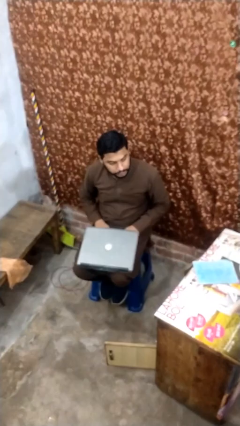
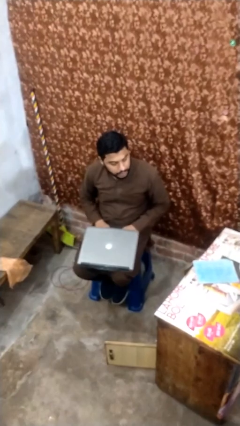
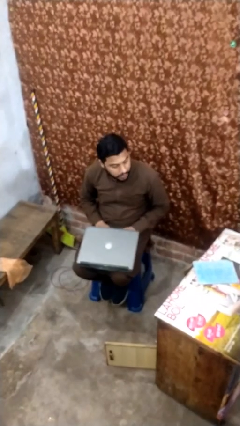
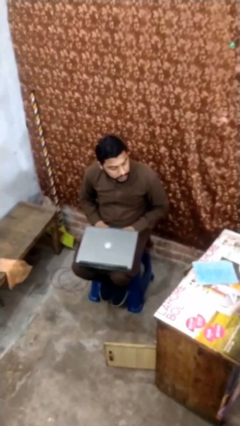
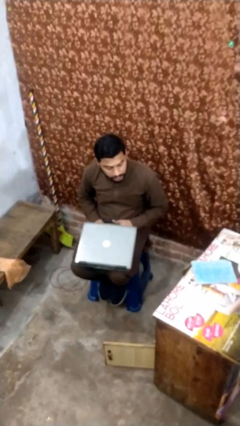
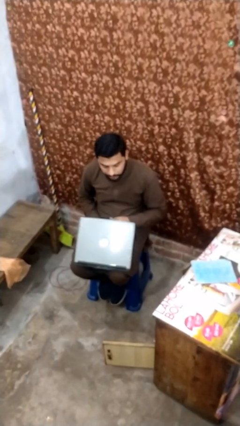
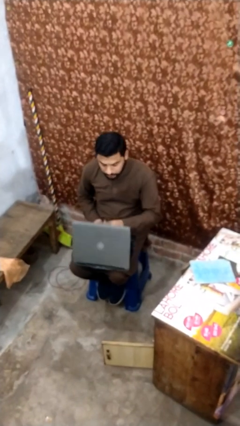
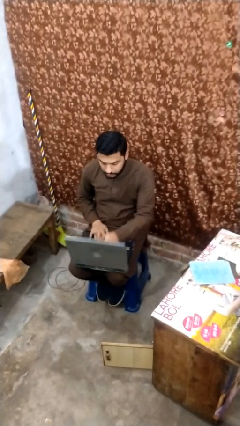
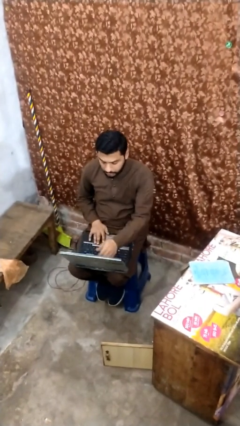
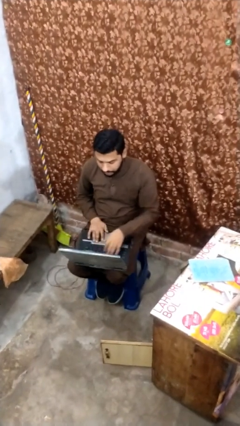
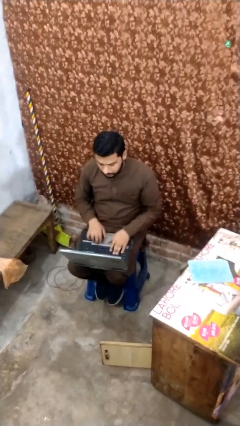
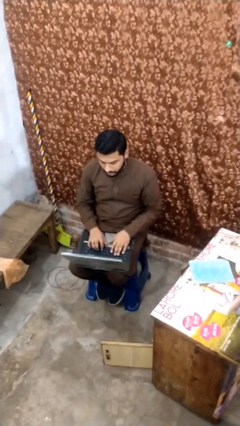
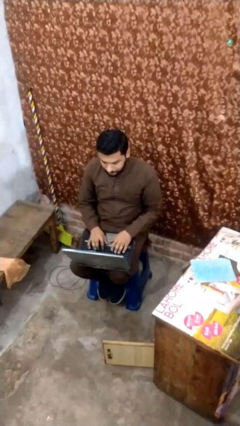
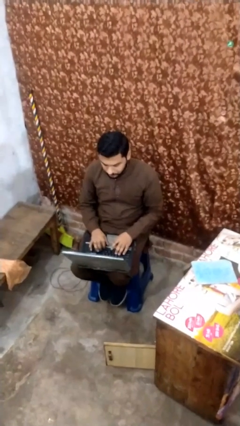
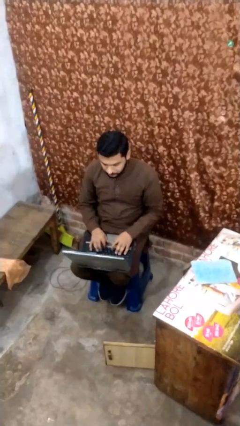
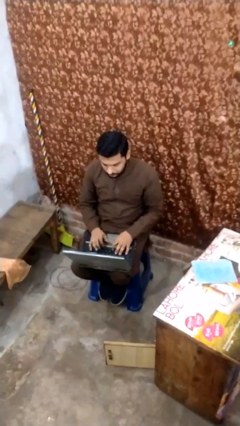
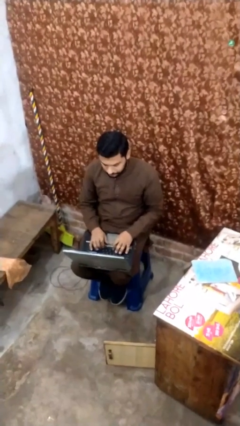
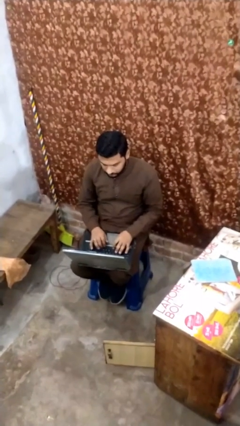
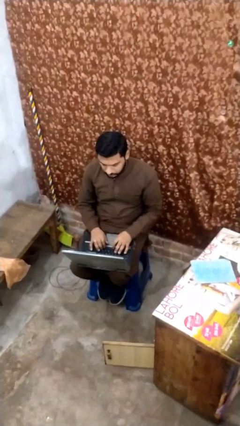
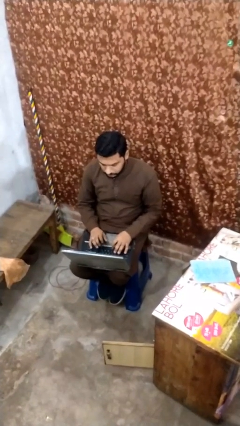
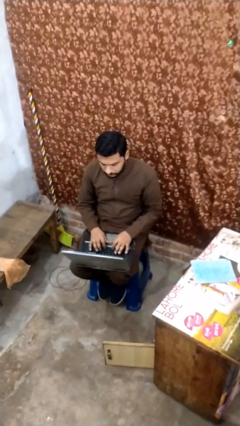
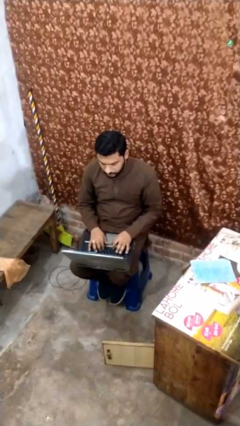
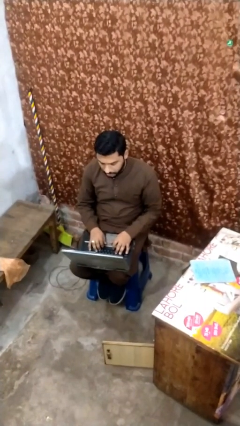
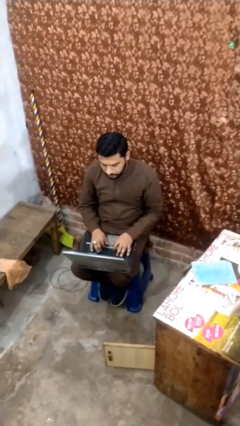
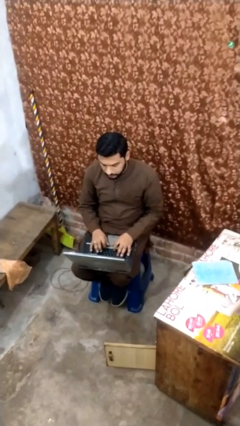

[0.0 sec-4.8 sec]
person interacts with laptop

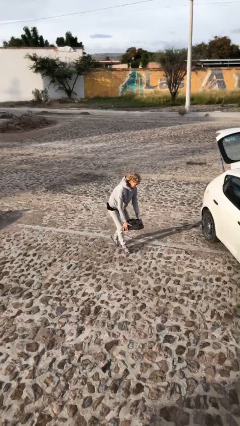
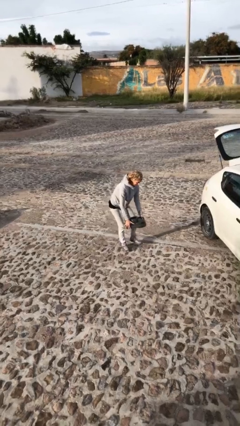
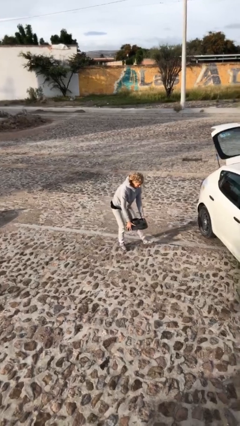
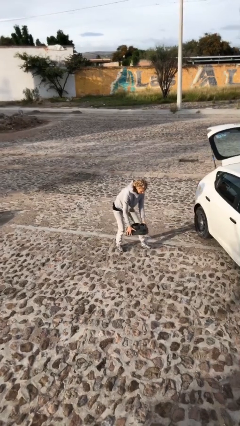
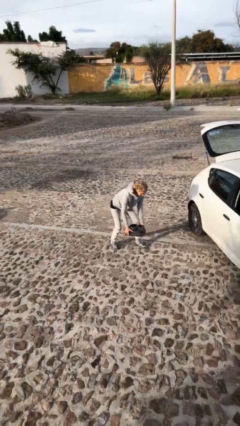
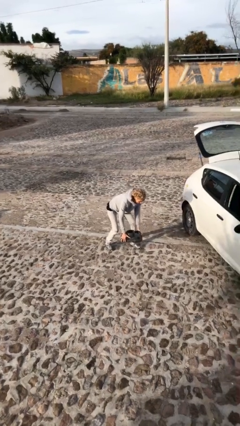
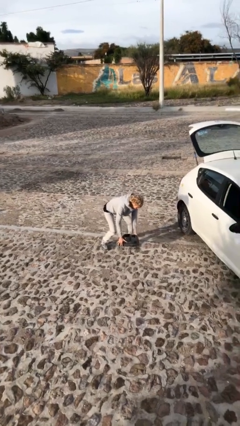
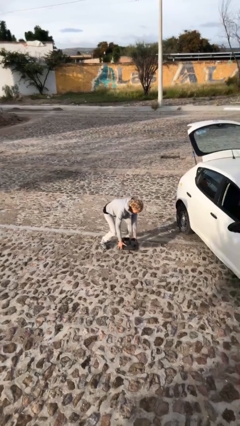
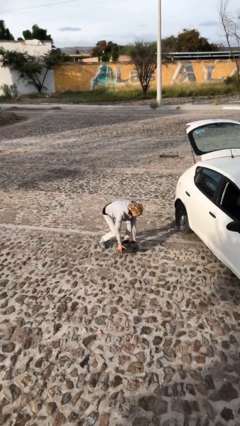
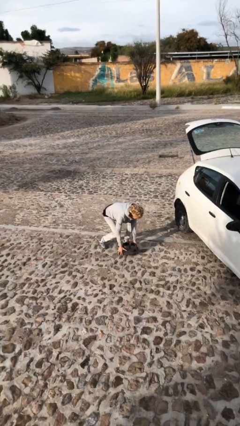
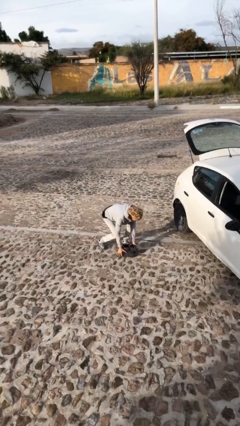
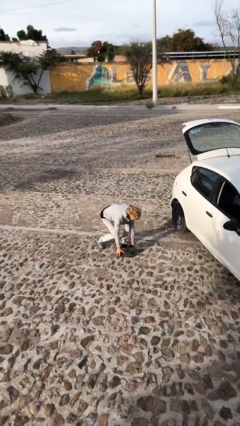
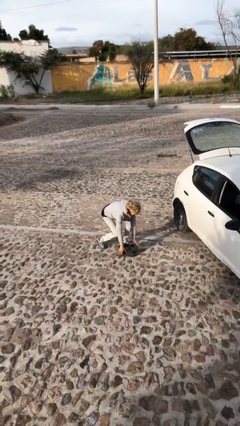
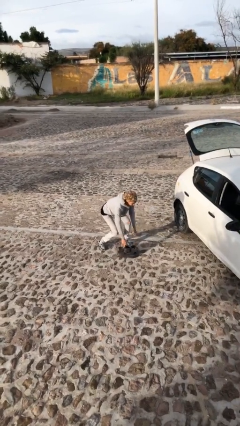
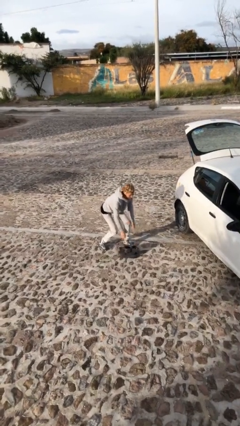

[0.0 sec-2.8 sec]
person puts down object on floor

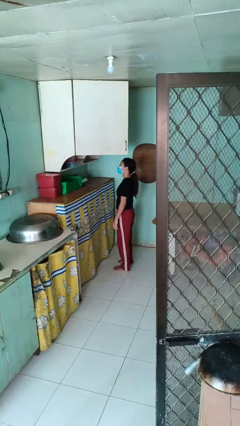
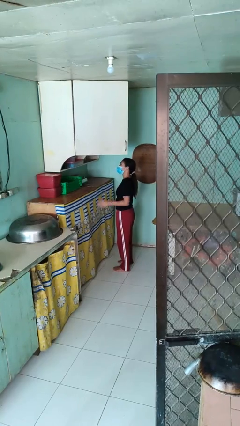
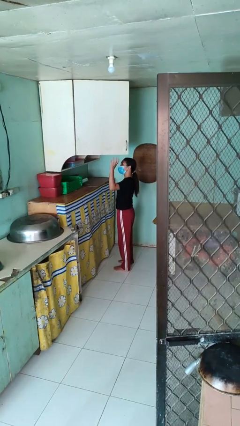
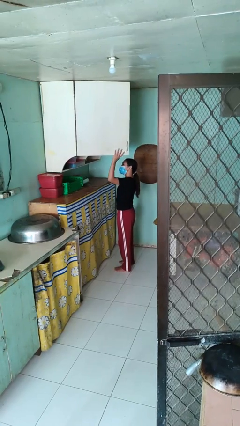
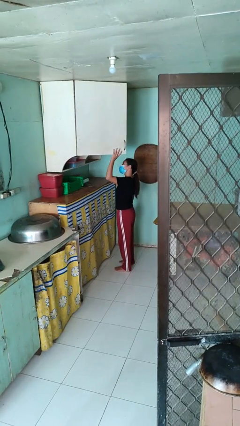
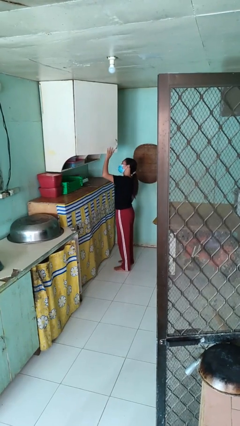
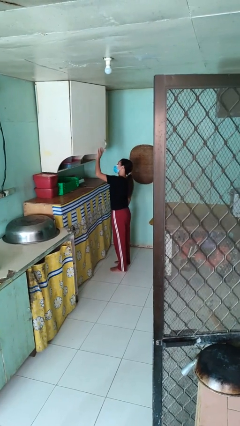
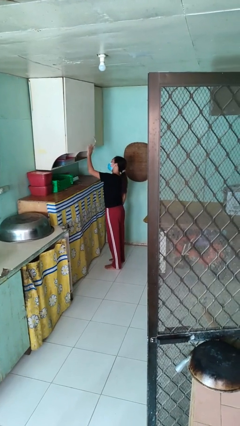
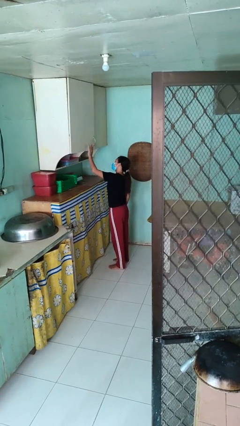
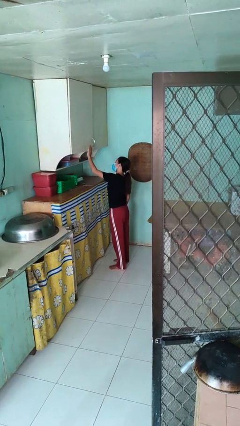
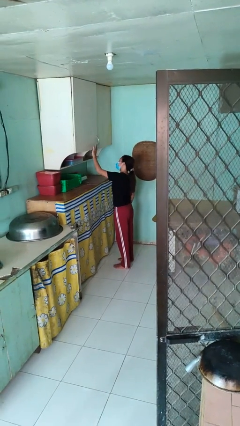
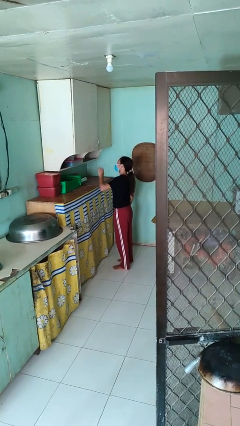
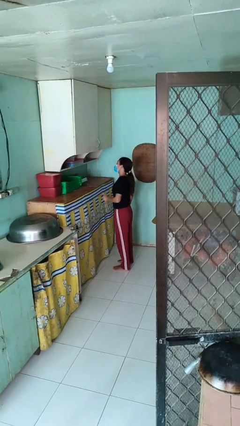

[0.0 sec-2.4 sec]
person closes cabinet

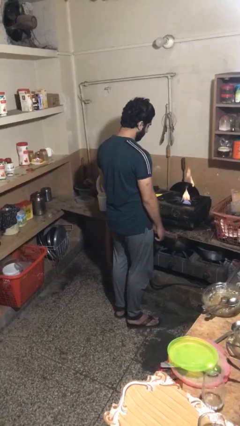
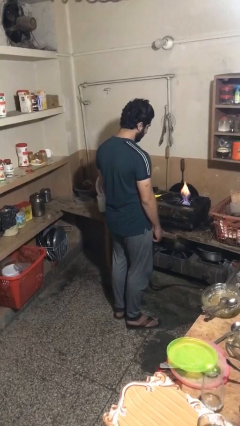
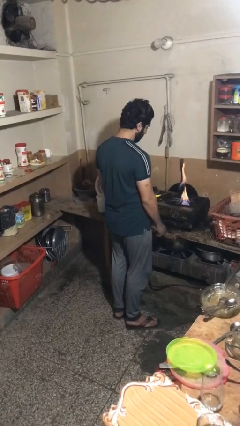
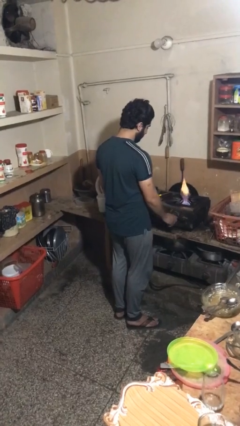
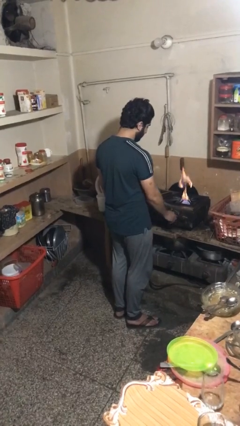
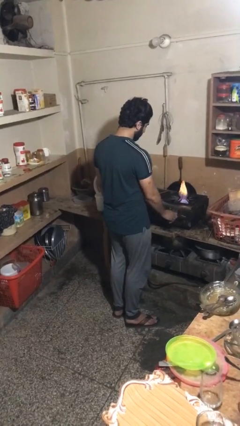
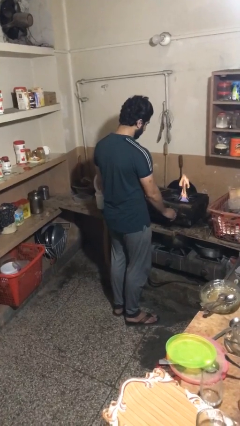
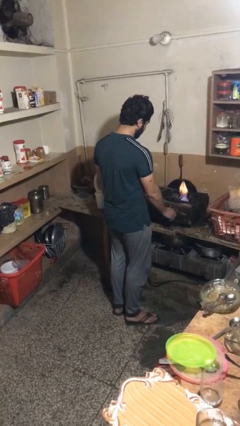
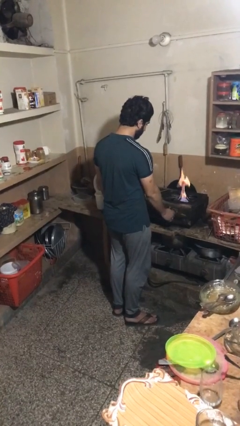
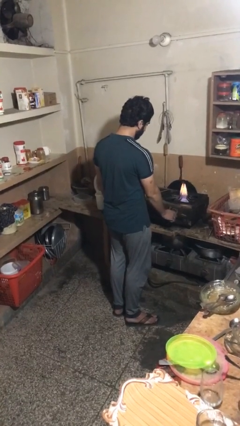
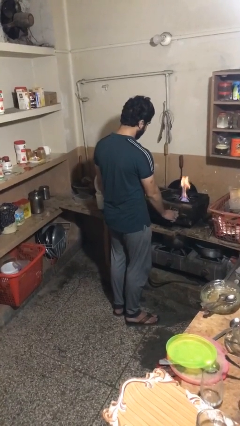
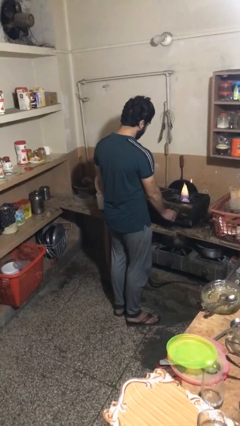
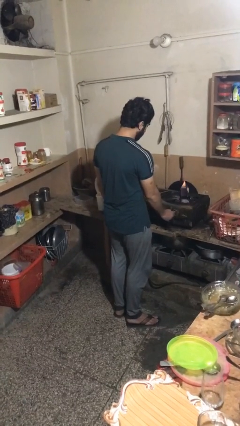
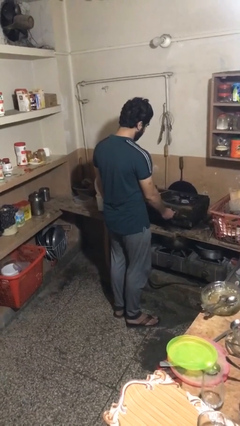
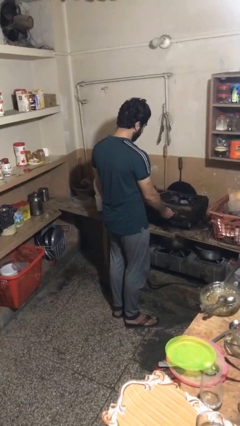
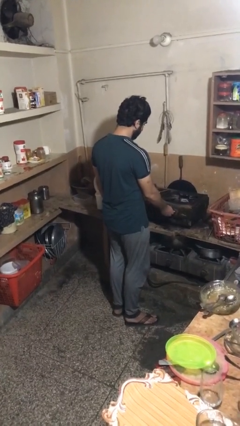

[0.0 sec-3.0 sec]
person turns off stovetop

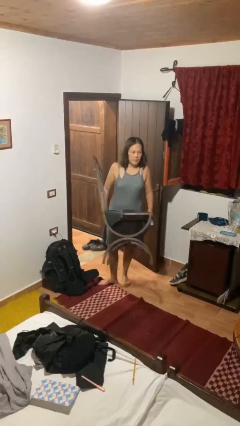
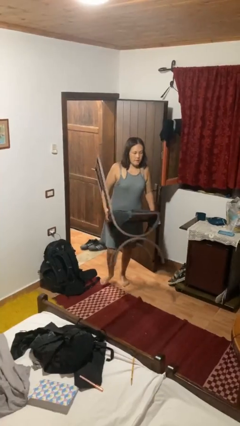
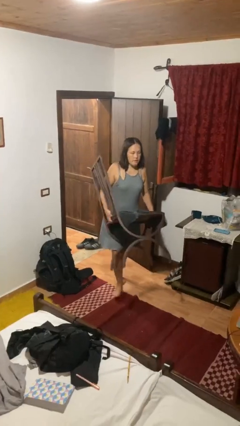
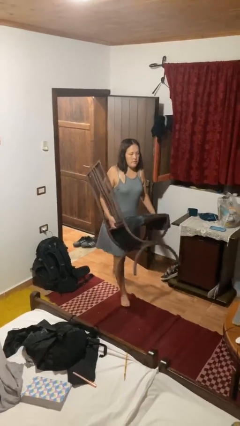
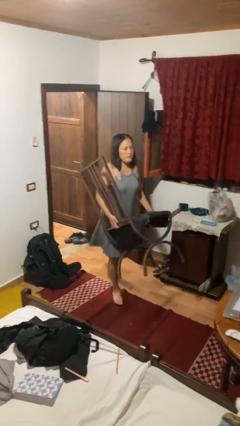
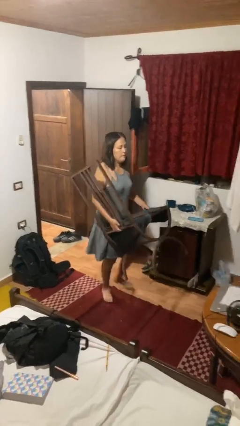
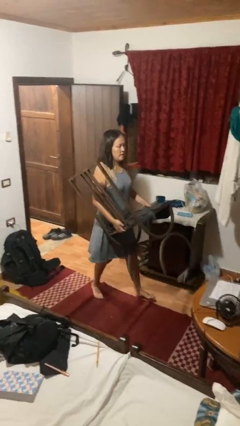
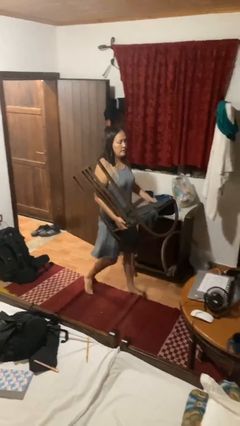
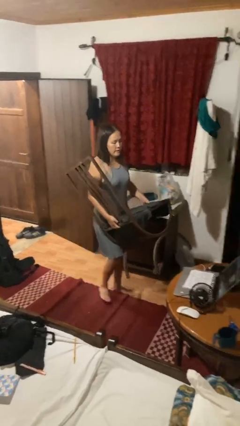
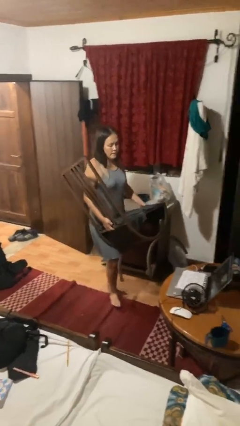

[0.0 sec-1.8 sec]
person carries furniture

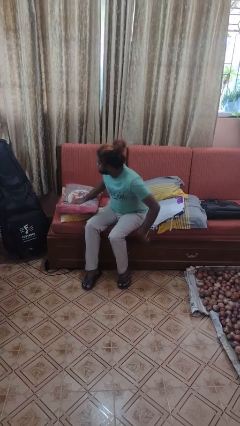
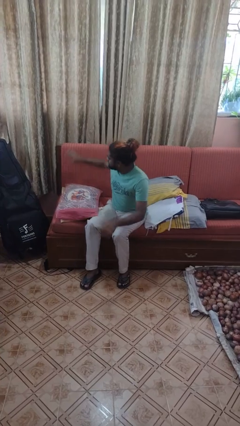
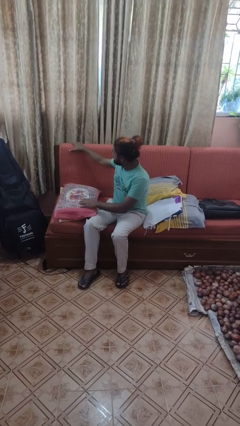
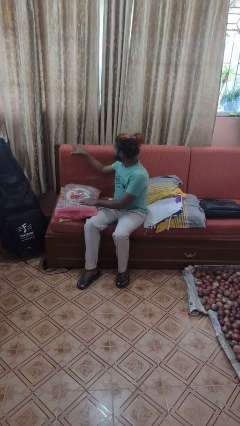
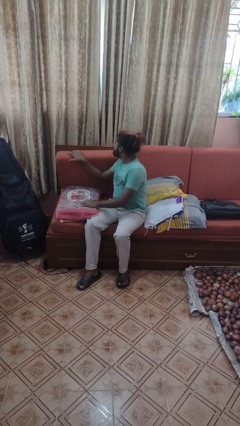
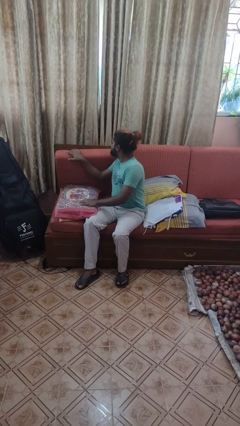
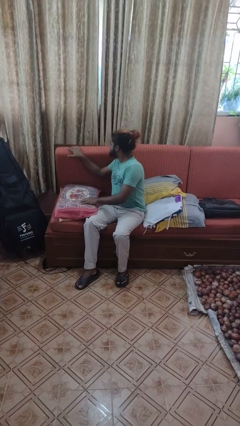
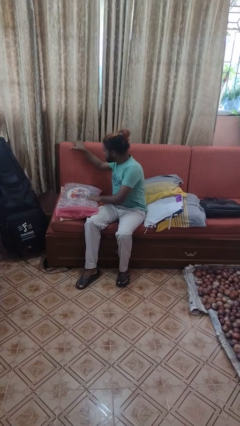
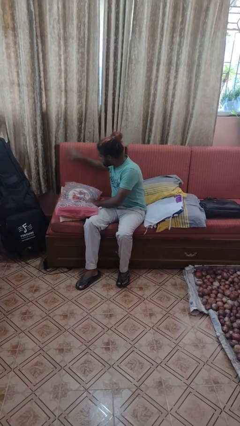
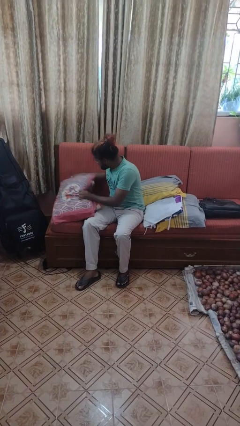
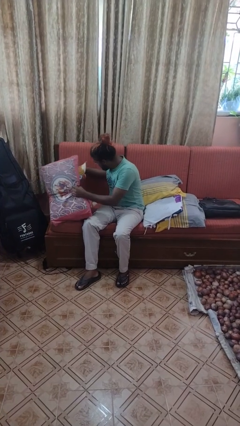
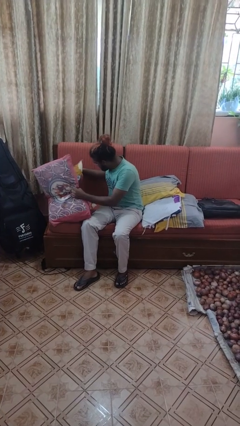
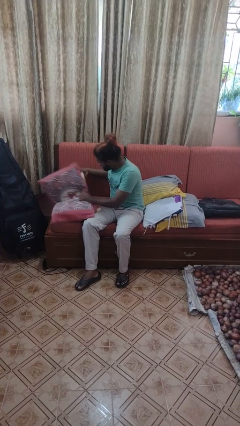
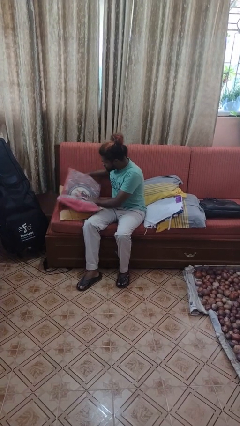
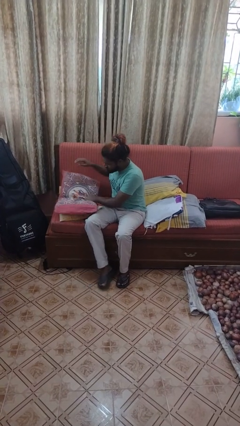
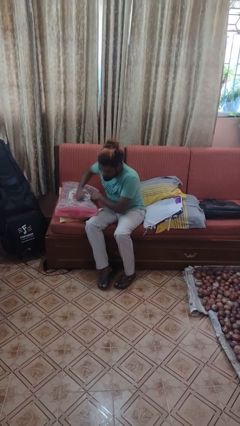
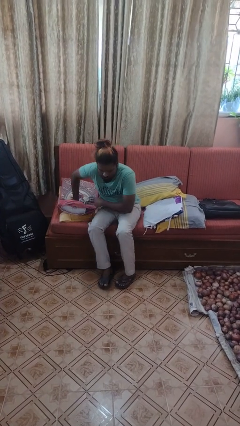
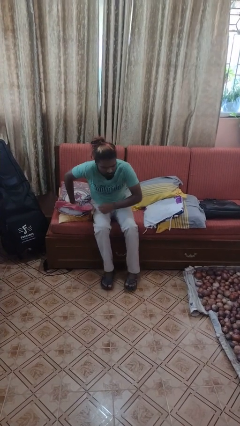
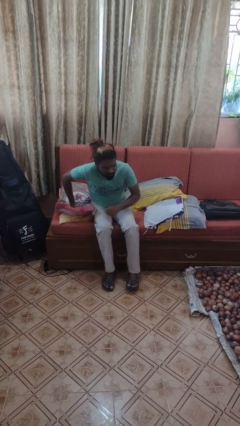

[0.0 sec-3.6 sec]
person searches in couch
